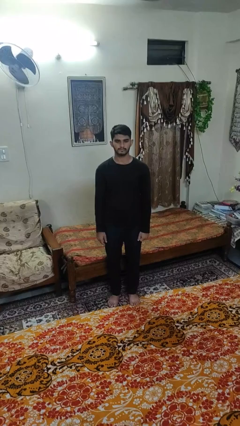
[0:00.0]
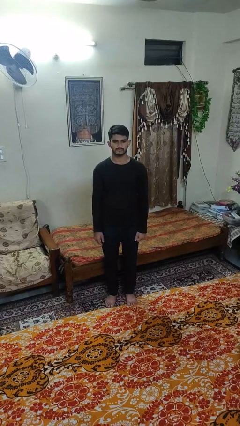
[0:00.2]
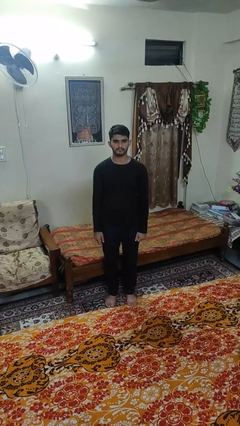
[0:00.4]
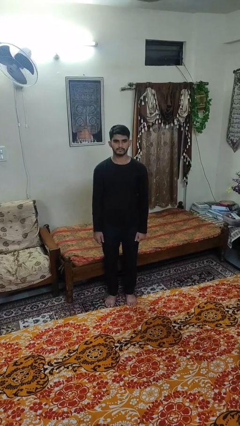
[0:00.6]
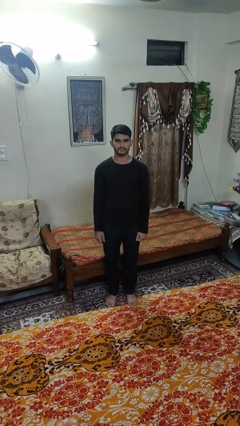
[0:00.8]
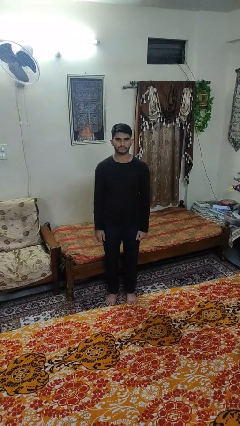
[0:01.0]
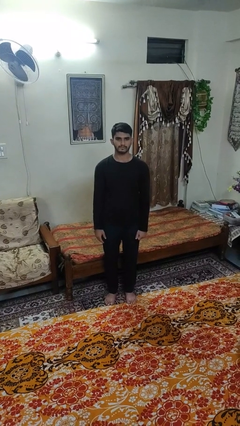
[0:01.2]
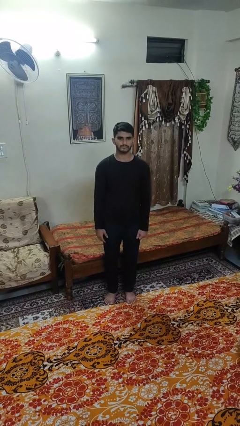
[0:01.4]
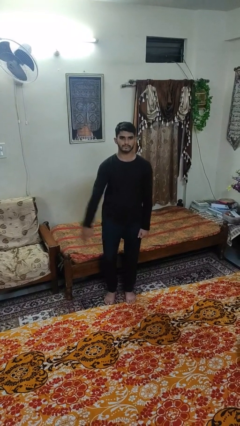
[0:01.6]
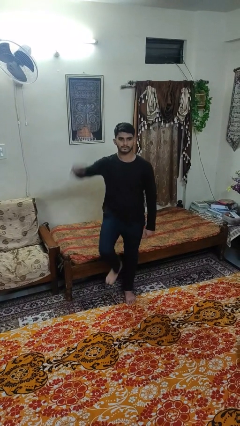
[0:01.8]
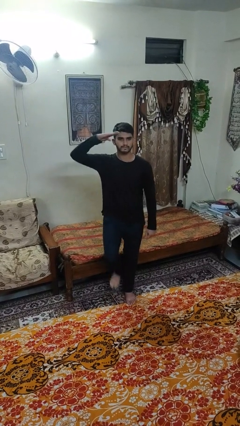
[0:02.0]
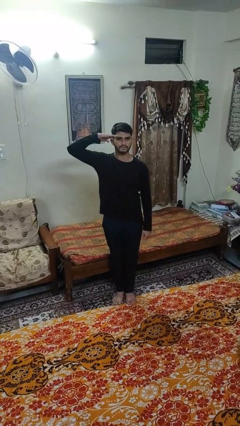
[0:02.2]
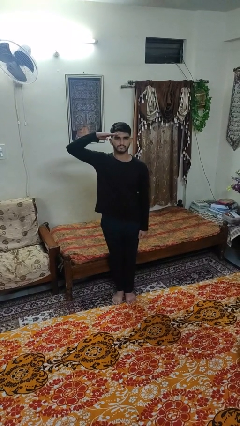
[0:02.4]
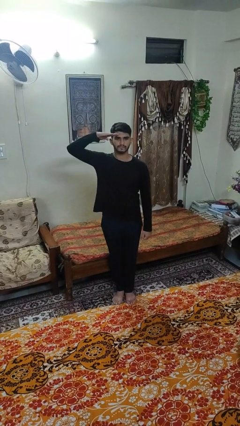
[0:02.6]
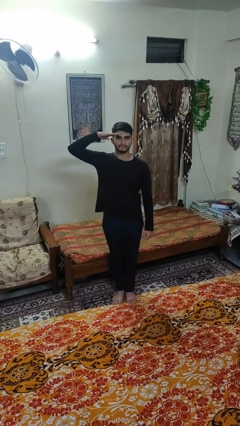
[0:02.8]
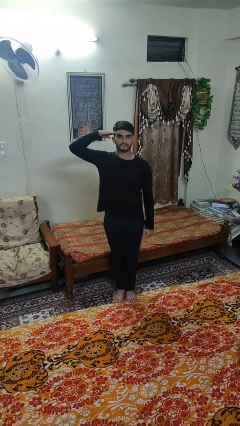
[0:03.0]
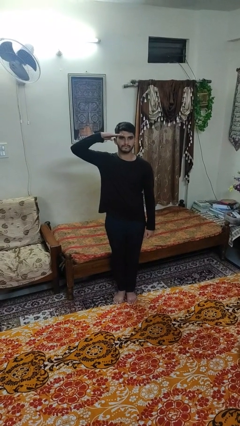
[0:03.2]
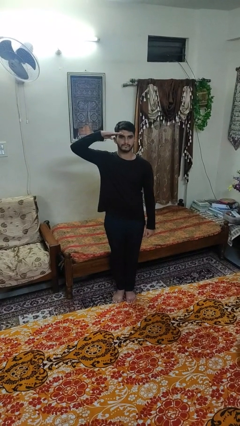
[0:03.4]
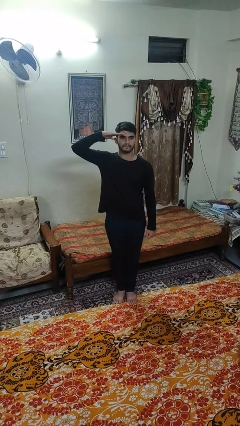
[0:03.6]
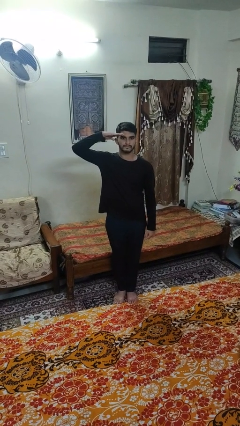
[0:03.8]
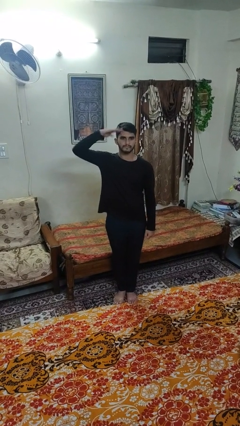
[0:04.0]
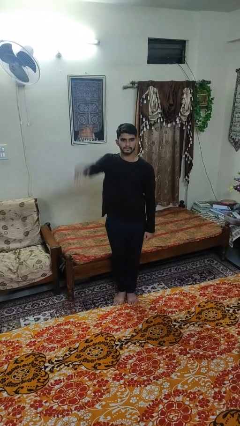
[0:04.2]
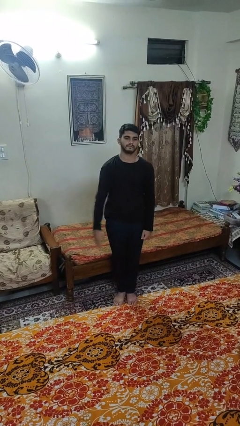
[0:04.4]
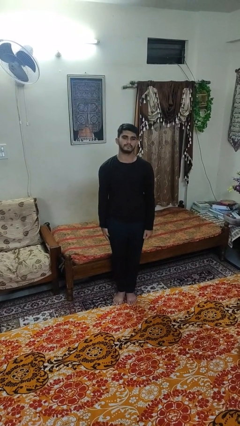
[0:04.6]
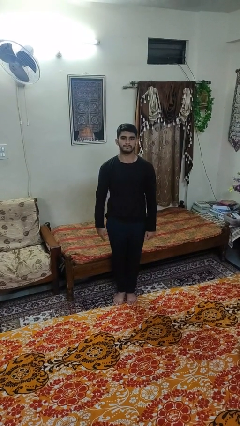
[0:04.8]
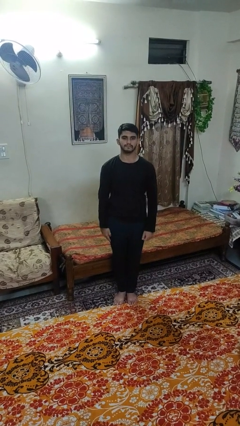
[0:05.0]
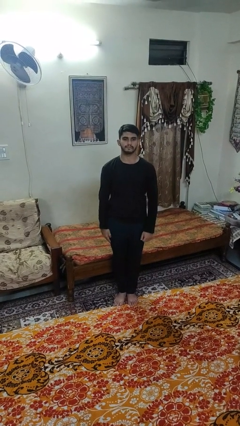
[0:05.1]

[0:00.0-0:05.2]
person salutes

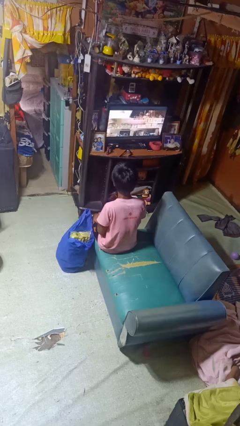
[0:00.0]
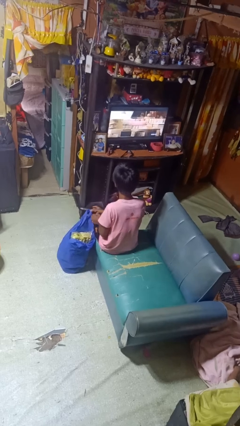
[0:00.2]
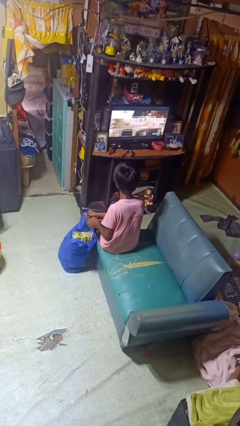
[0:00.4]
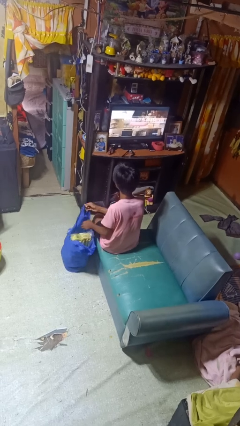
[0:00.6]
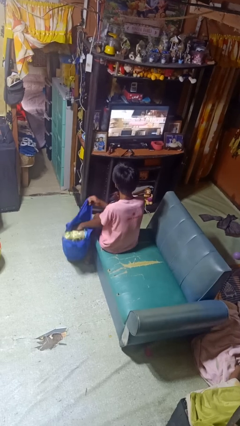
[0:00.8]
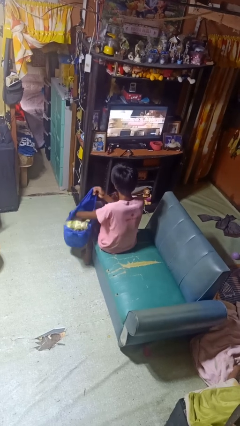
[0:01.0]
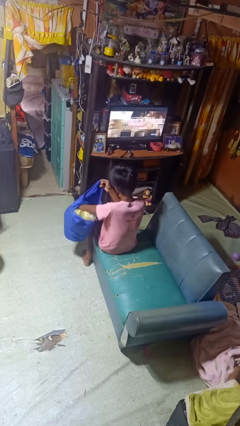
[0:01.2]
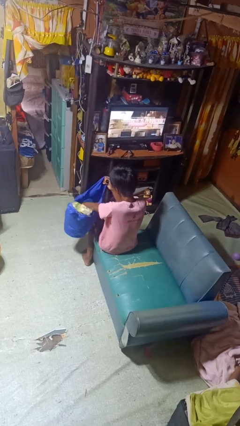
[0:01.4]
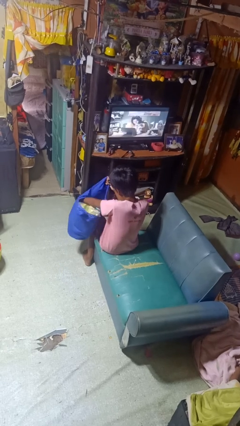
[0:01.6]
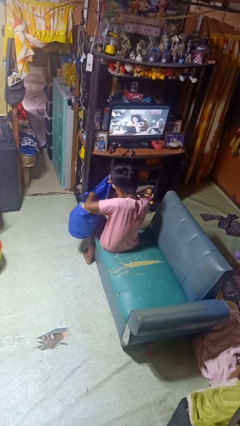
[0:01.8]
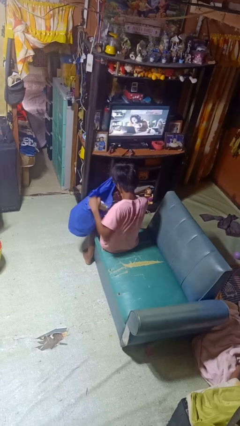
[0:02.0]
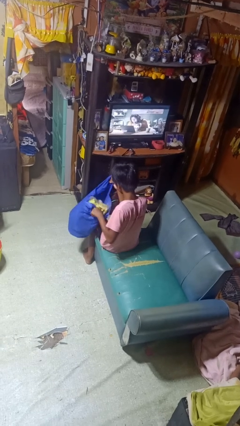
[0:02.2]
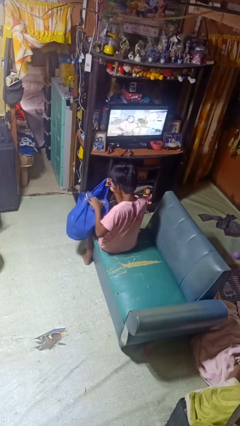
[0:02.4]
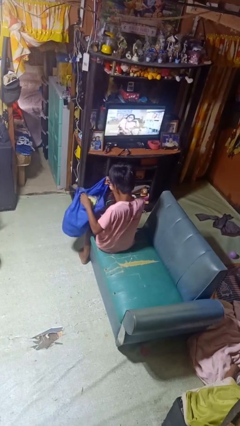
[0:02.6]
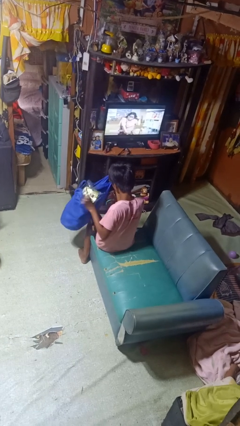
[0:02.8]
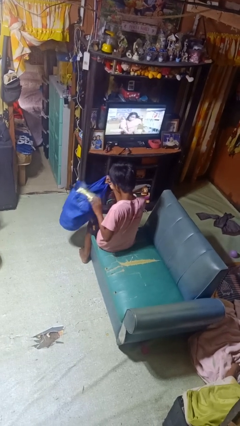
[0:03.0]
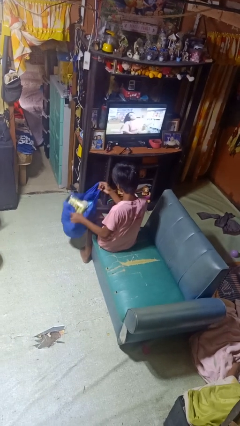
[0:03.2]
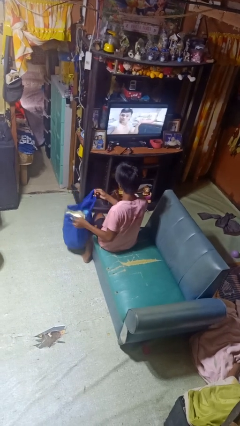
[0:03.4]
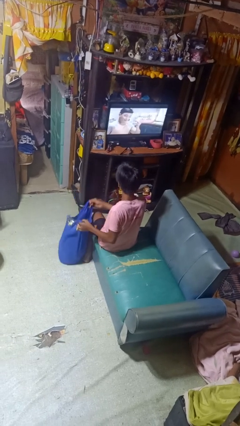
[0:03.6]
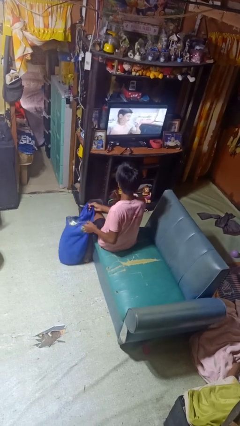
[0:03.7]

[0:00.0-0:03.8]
person searches in bag

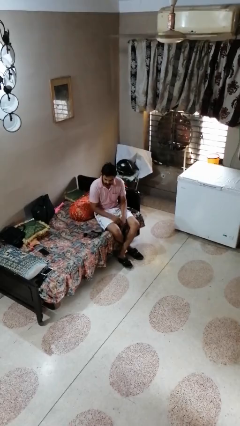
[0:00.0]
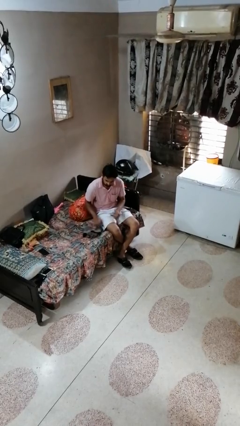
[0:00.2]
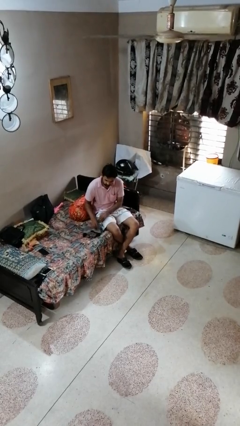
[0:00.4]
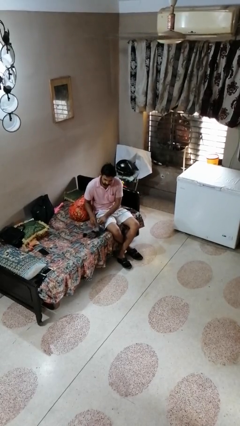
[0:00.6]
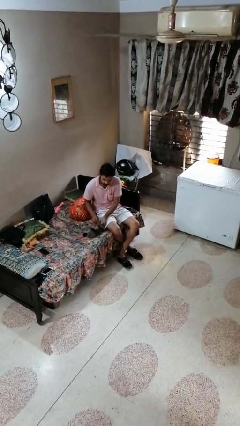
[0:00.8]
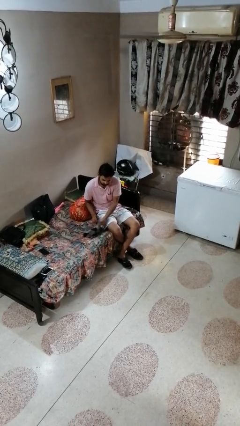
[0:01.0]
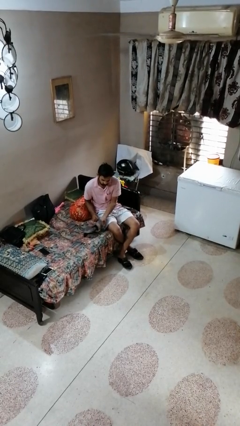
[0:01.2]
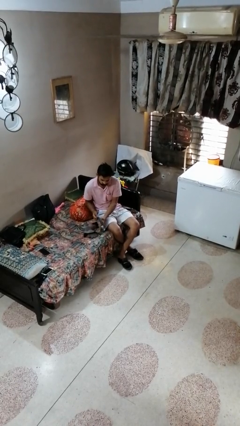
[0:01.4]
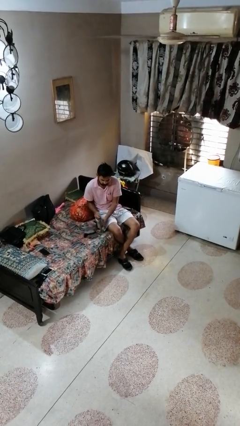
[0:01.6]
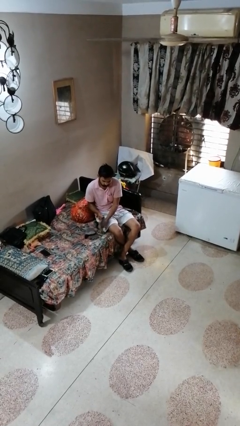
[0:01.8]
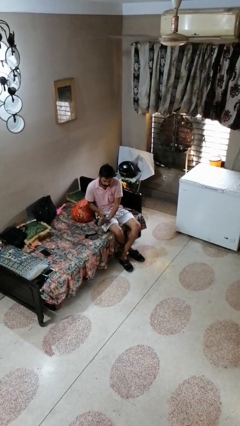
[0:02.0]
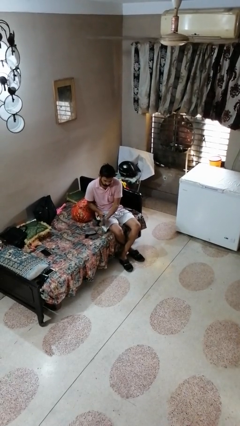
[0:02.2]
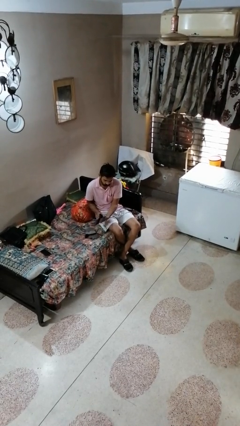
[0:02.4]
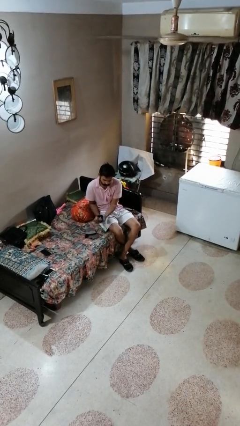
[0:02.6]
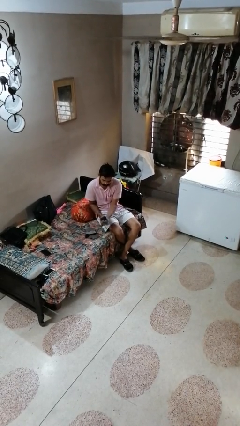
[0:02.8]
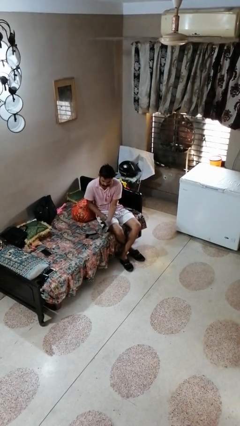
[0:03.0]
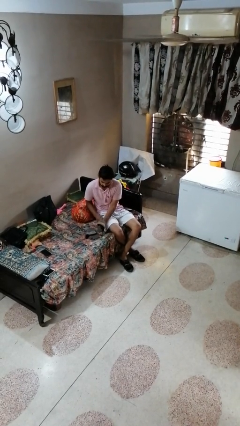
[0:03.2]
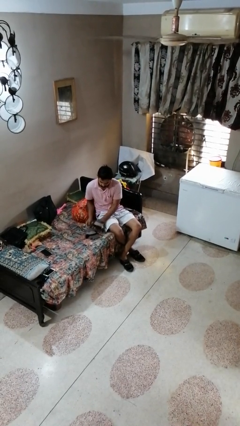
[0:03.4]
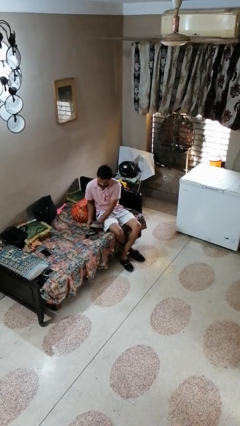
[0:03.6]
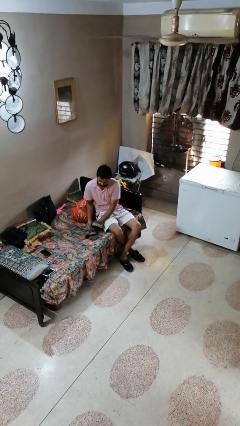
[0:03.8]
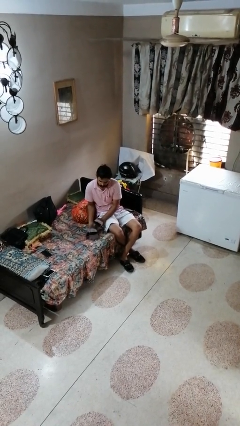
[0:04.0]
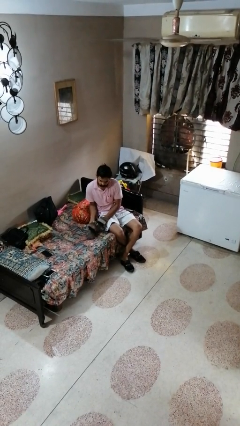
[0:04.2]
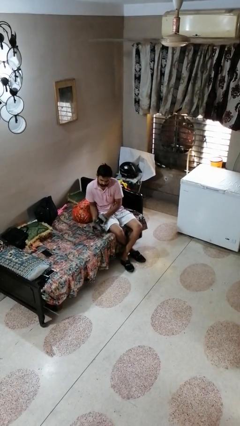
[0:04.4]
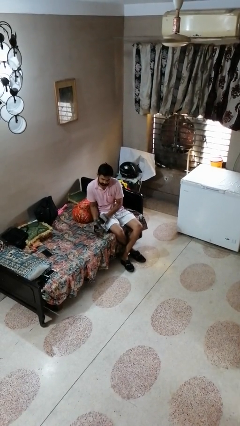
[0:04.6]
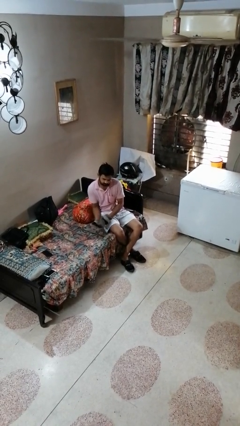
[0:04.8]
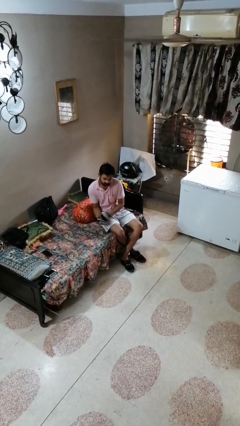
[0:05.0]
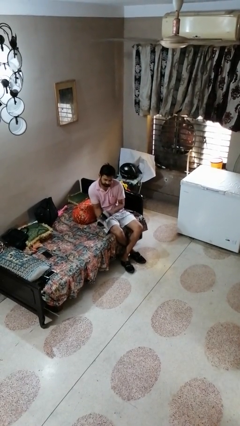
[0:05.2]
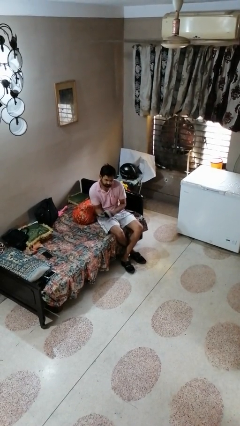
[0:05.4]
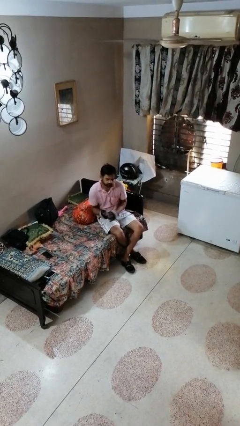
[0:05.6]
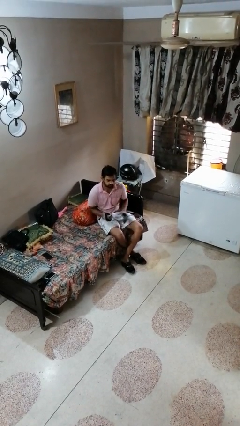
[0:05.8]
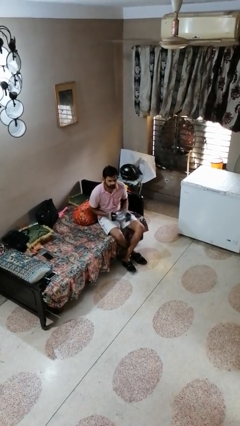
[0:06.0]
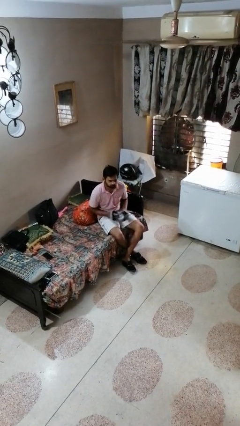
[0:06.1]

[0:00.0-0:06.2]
person puts on gloves

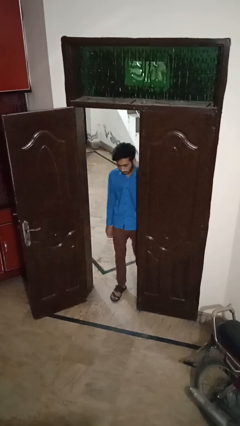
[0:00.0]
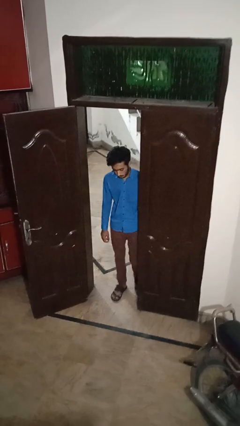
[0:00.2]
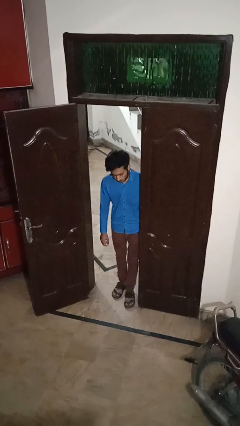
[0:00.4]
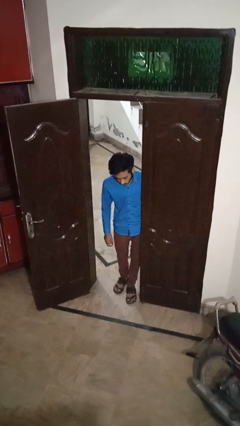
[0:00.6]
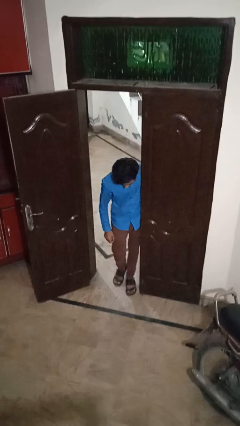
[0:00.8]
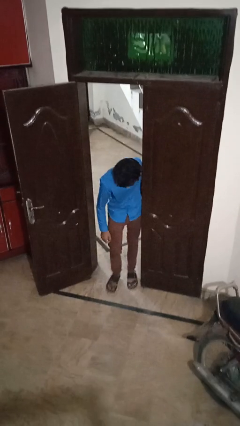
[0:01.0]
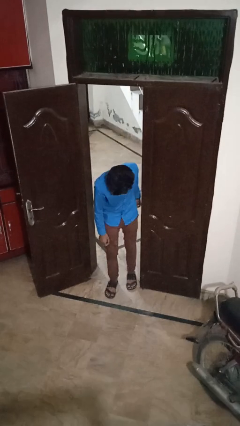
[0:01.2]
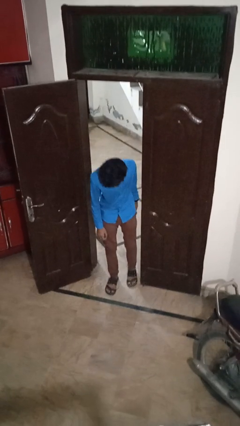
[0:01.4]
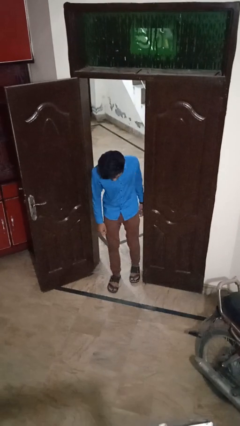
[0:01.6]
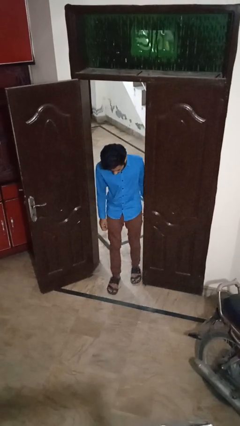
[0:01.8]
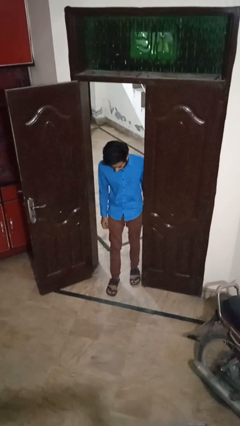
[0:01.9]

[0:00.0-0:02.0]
person bumps into wall
